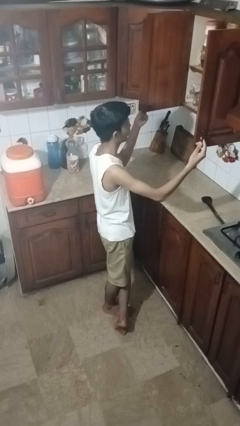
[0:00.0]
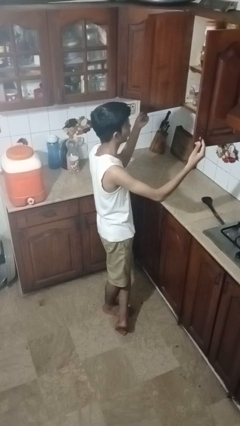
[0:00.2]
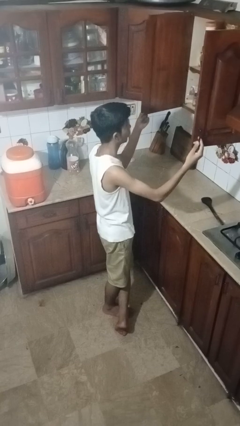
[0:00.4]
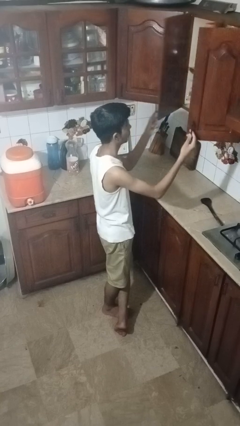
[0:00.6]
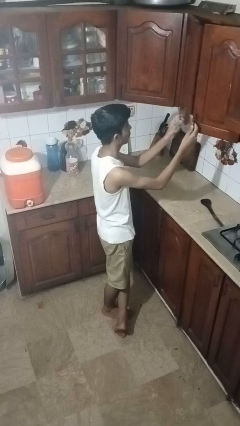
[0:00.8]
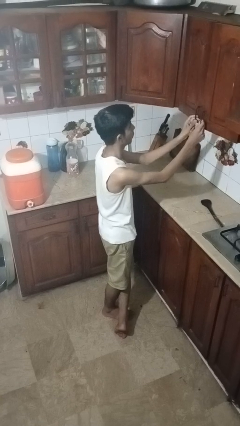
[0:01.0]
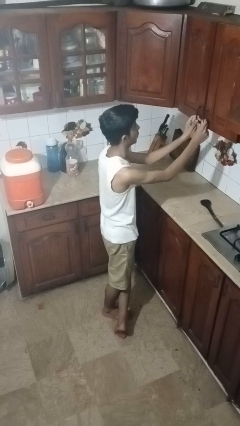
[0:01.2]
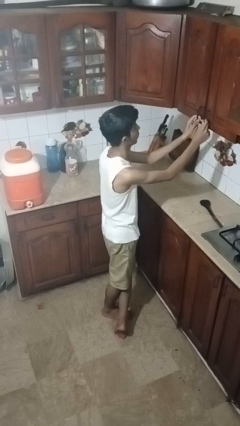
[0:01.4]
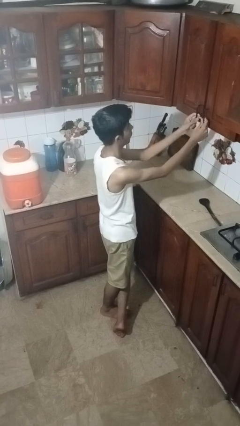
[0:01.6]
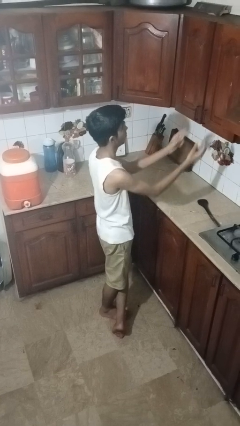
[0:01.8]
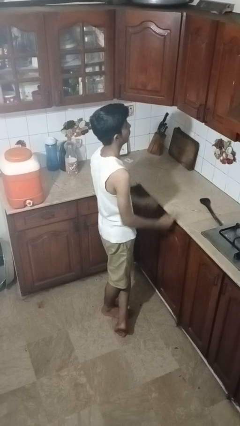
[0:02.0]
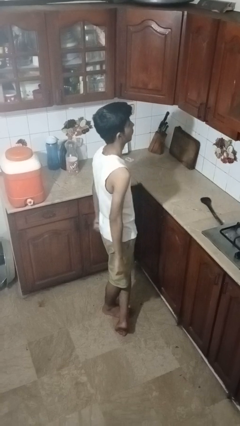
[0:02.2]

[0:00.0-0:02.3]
person closes cabinet

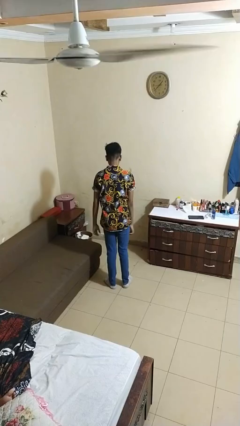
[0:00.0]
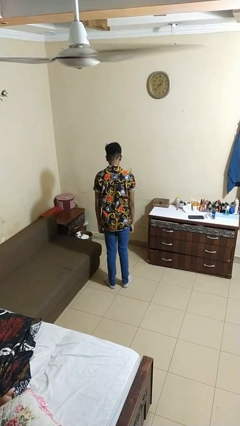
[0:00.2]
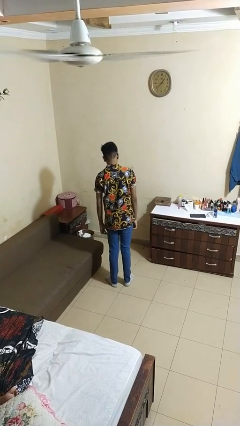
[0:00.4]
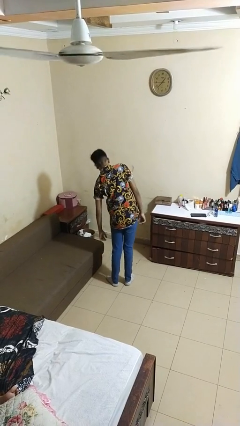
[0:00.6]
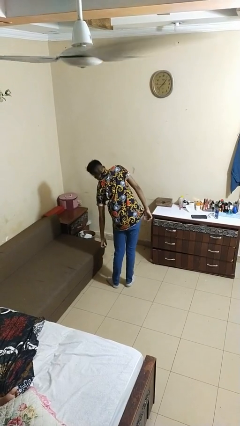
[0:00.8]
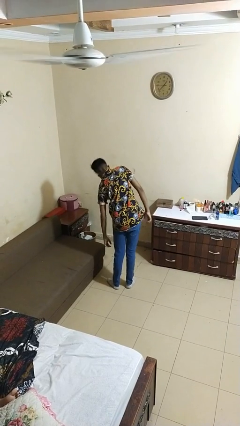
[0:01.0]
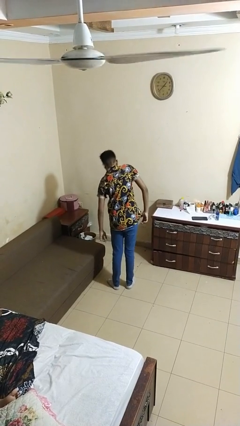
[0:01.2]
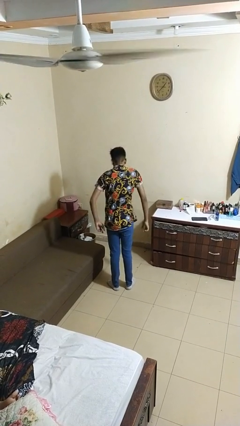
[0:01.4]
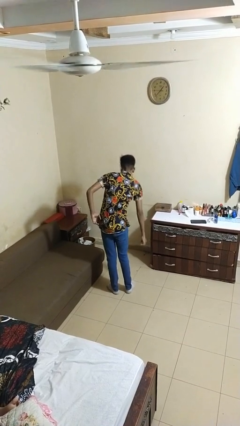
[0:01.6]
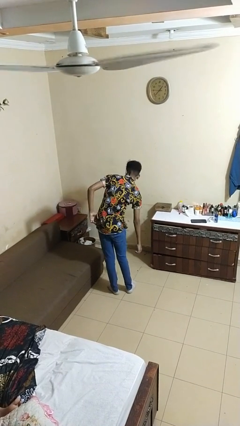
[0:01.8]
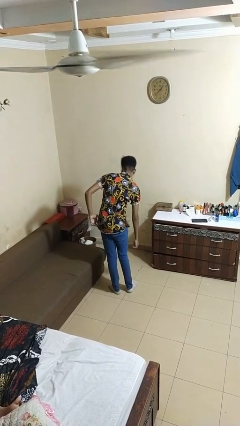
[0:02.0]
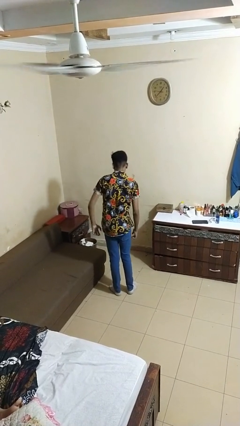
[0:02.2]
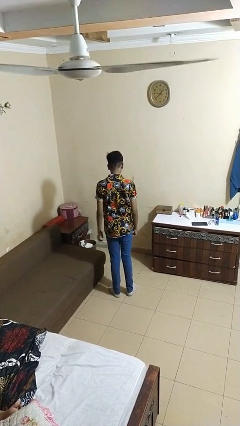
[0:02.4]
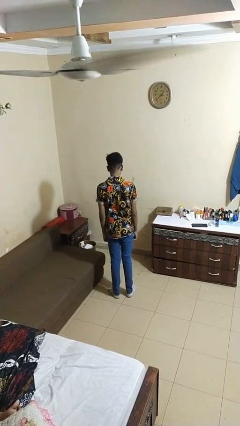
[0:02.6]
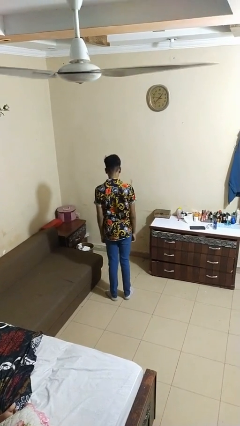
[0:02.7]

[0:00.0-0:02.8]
person stretches arms to side

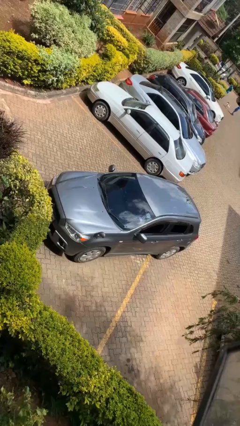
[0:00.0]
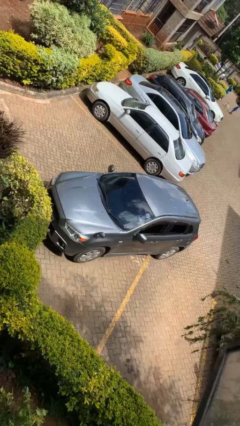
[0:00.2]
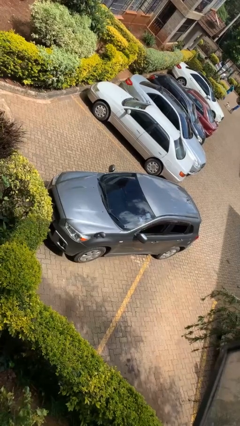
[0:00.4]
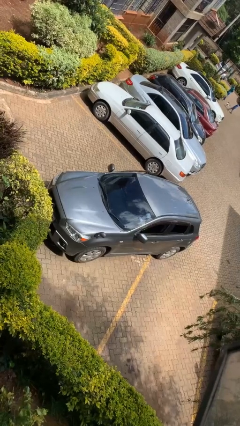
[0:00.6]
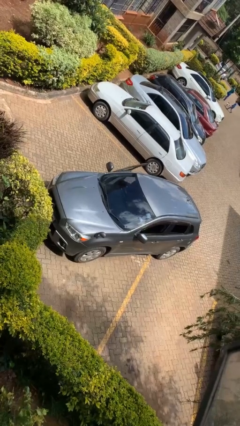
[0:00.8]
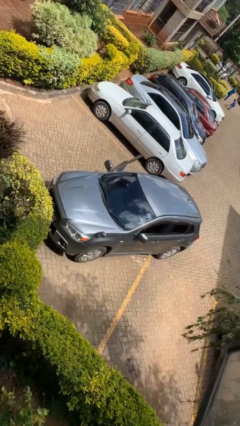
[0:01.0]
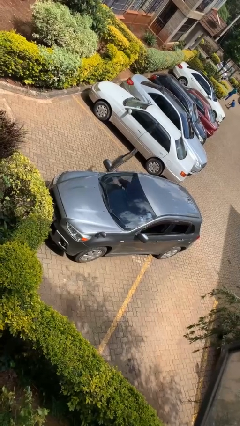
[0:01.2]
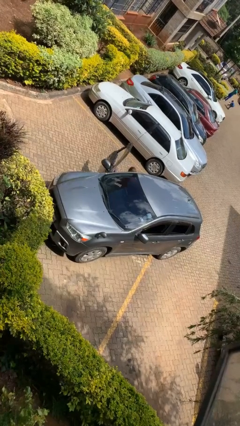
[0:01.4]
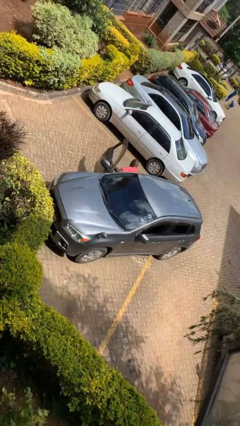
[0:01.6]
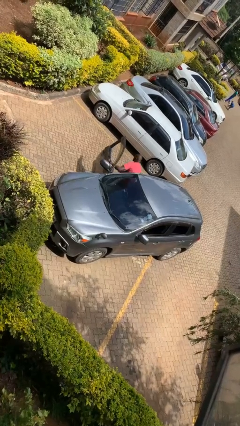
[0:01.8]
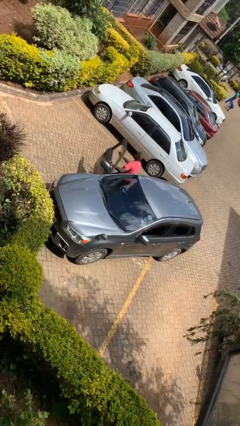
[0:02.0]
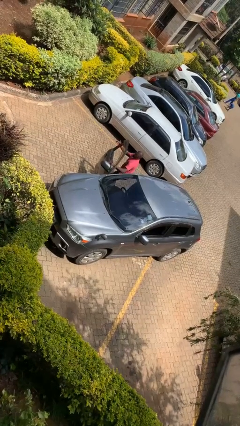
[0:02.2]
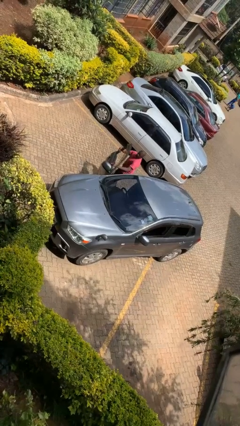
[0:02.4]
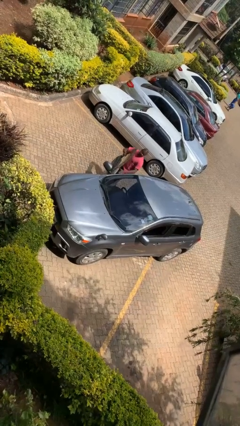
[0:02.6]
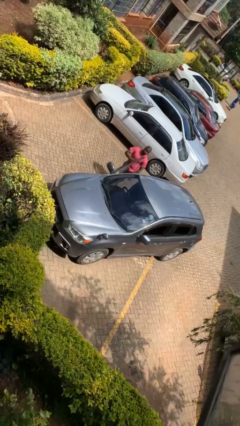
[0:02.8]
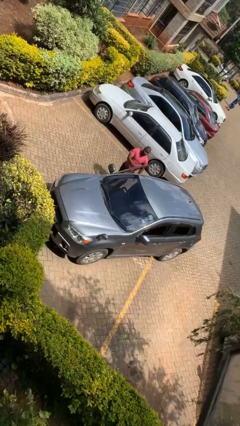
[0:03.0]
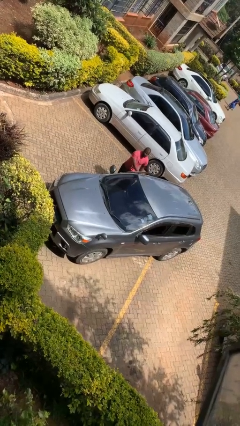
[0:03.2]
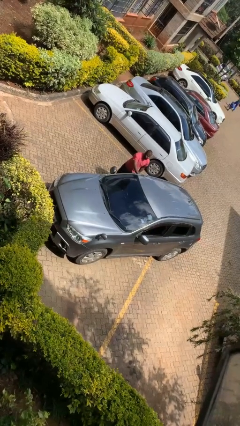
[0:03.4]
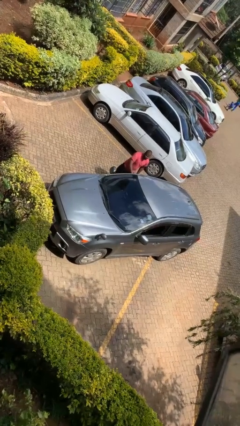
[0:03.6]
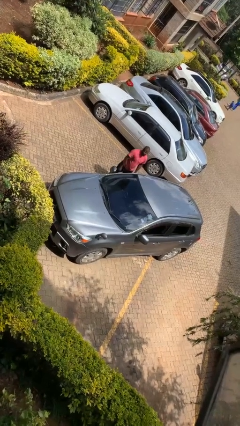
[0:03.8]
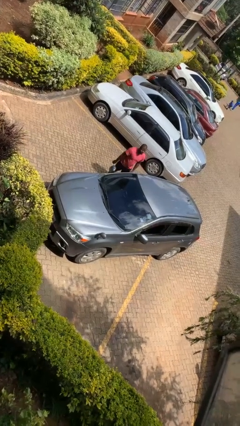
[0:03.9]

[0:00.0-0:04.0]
car drops off person

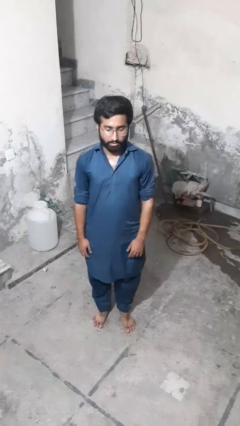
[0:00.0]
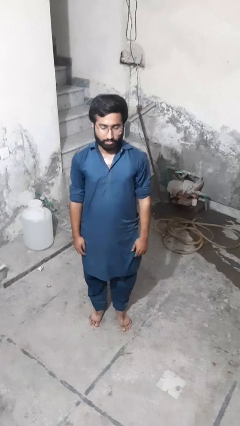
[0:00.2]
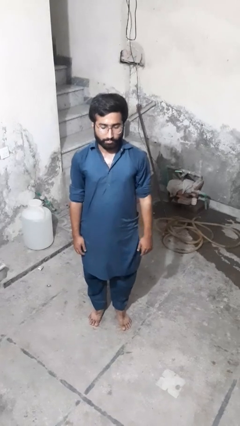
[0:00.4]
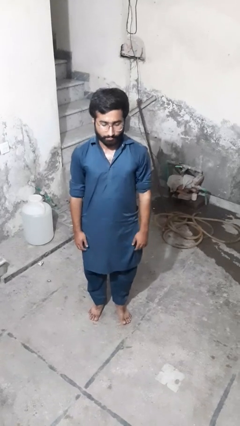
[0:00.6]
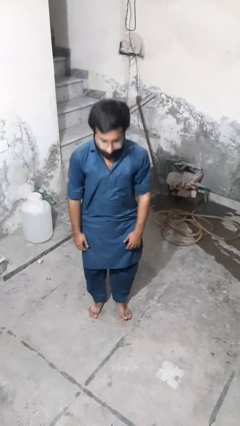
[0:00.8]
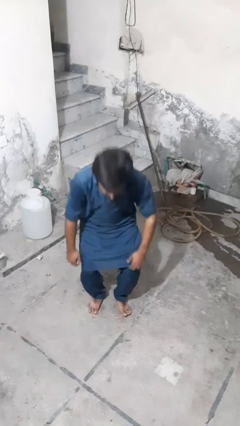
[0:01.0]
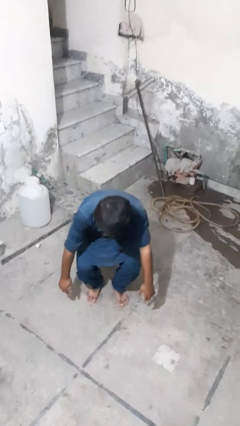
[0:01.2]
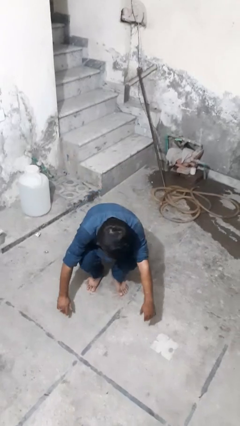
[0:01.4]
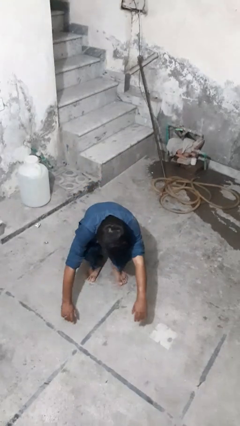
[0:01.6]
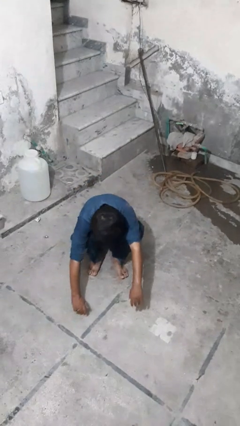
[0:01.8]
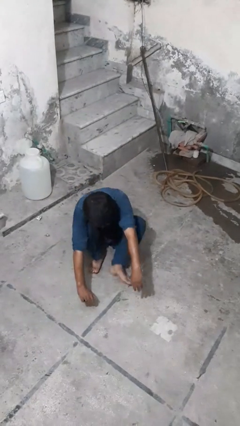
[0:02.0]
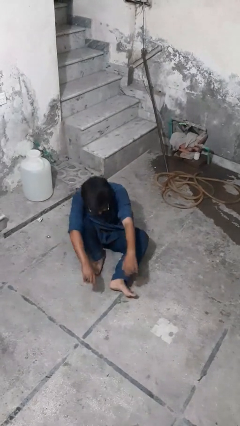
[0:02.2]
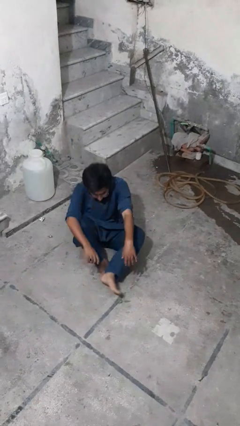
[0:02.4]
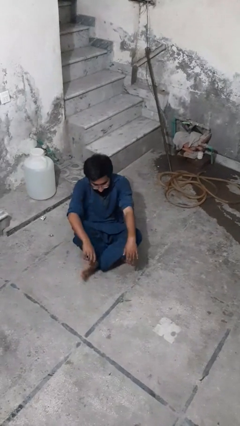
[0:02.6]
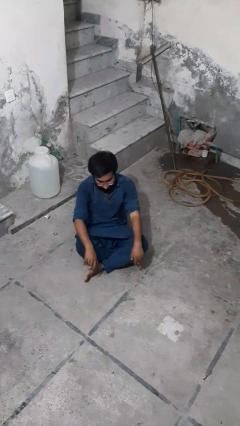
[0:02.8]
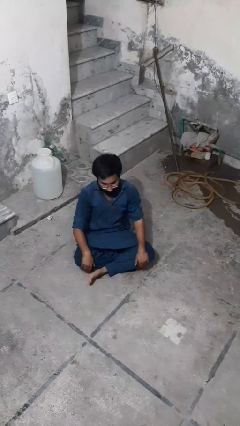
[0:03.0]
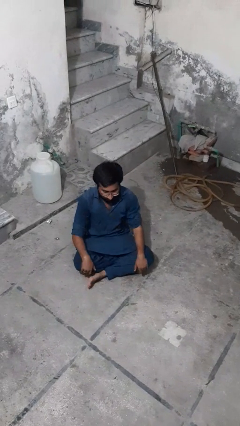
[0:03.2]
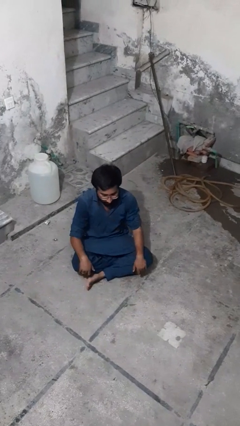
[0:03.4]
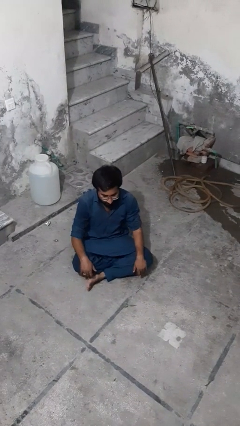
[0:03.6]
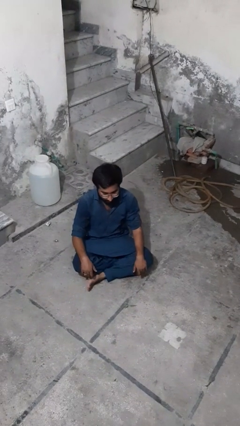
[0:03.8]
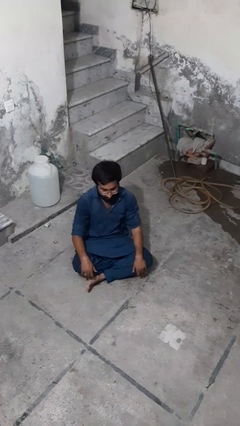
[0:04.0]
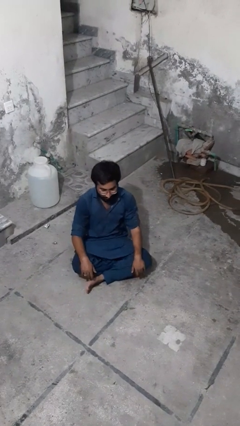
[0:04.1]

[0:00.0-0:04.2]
person sits crisscross

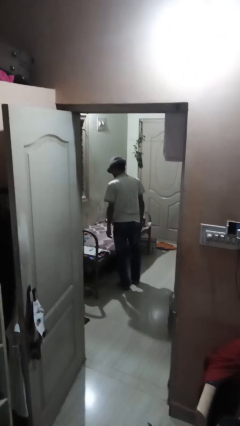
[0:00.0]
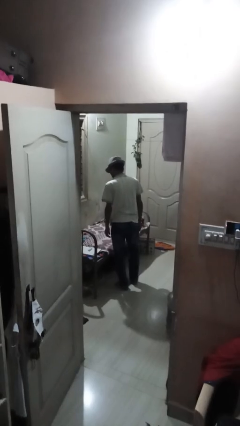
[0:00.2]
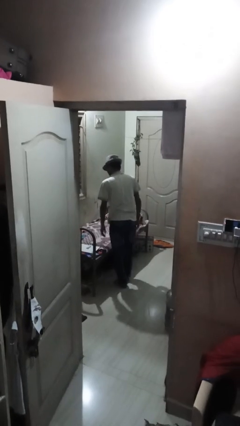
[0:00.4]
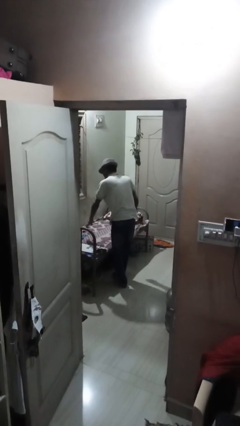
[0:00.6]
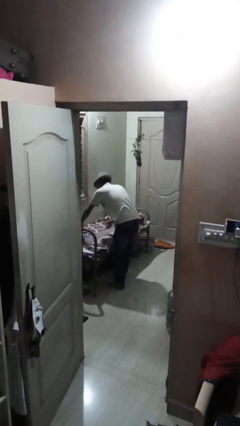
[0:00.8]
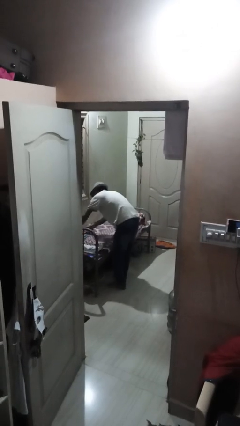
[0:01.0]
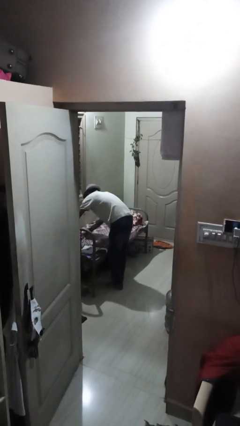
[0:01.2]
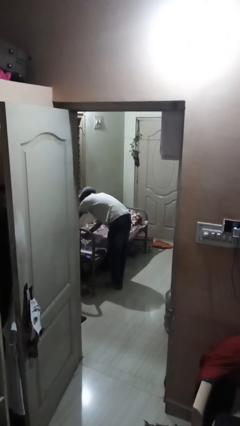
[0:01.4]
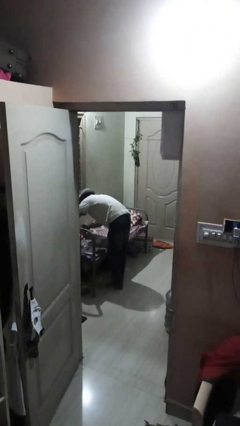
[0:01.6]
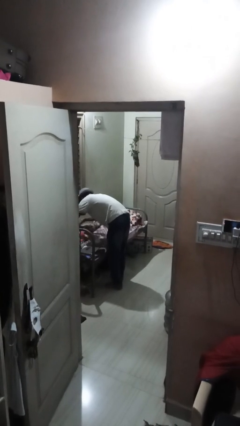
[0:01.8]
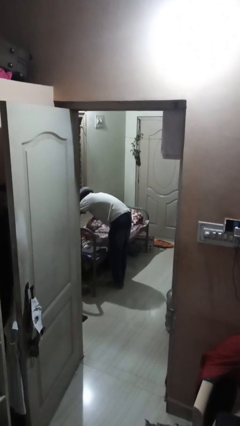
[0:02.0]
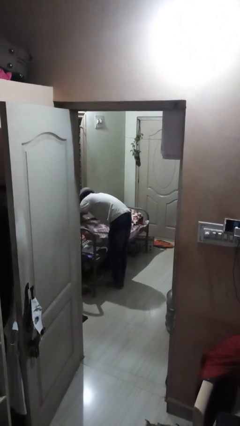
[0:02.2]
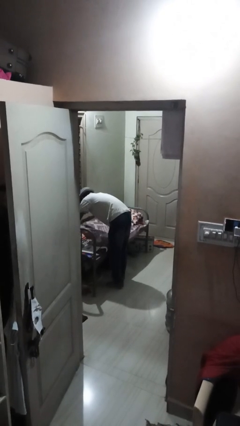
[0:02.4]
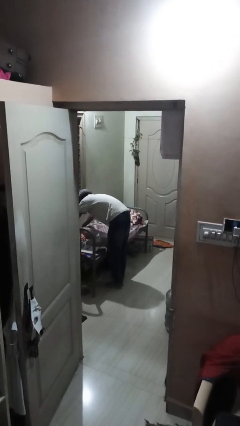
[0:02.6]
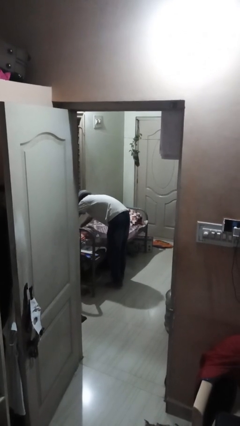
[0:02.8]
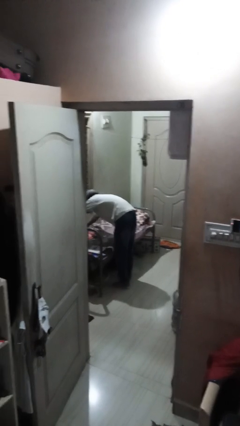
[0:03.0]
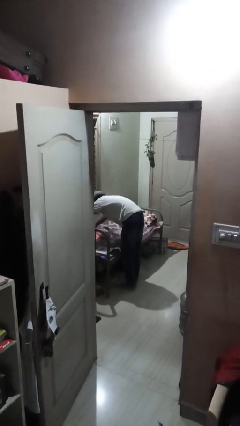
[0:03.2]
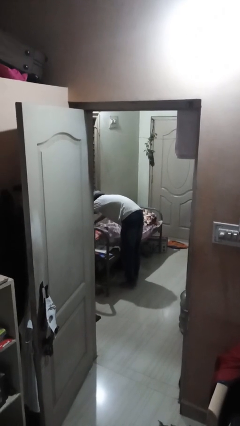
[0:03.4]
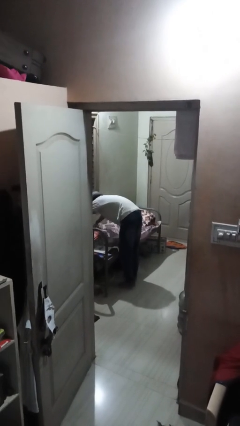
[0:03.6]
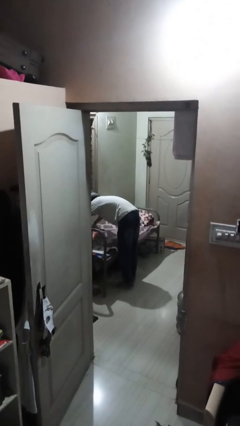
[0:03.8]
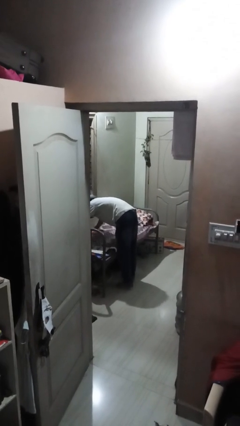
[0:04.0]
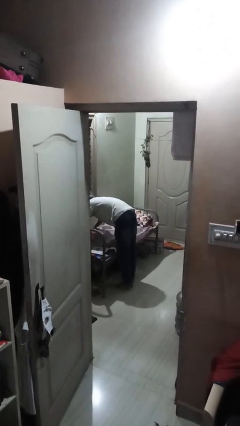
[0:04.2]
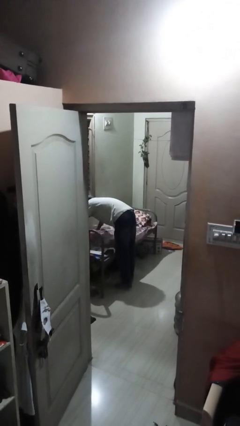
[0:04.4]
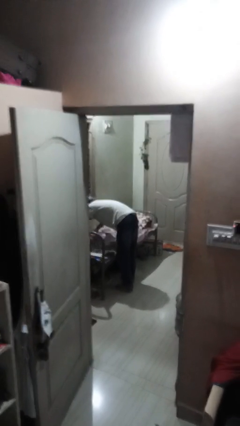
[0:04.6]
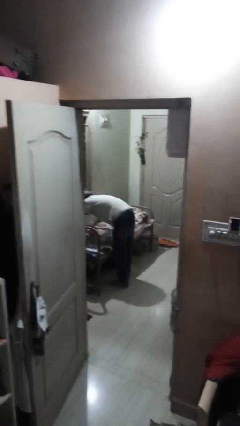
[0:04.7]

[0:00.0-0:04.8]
person makes bed
